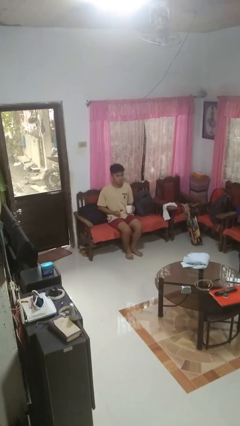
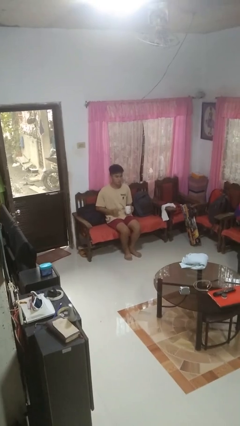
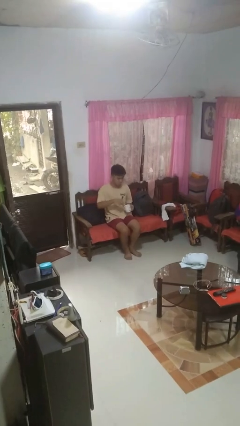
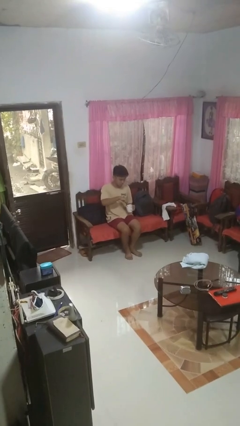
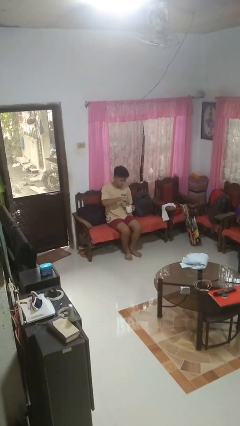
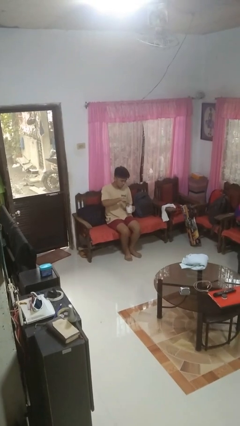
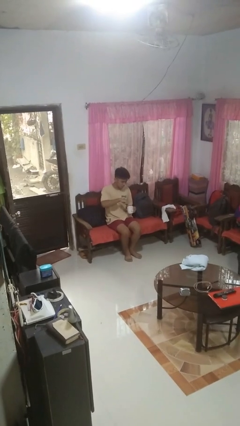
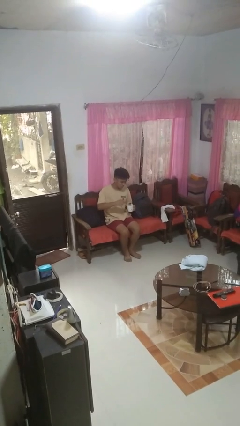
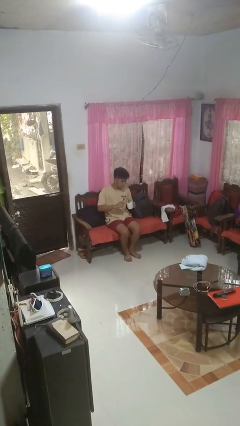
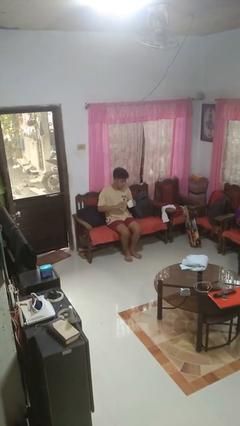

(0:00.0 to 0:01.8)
person stirs mug

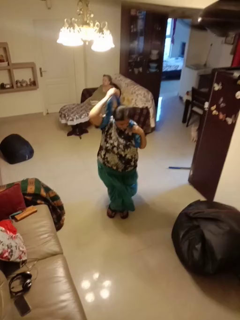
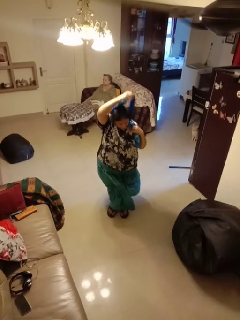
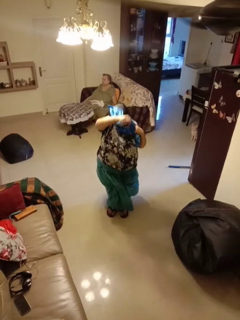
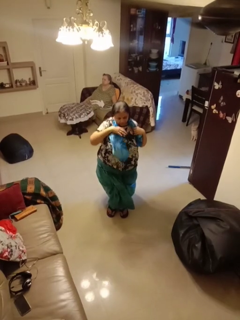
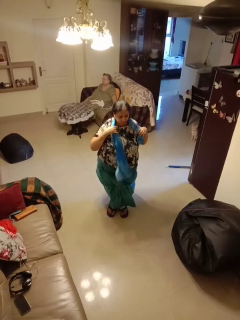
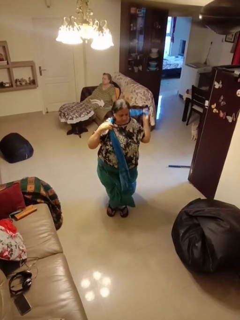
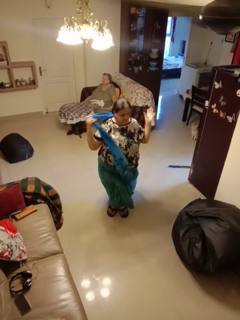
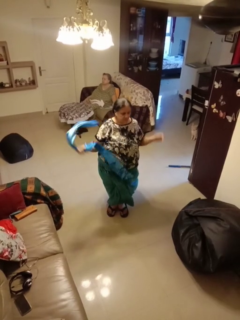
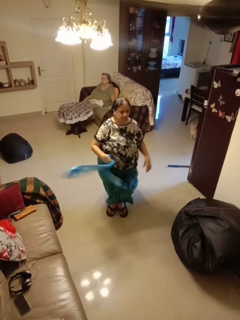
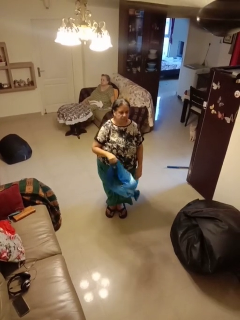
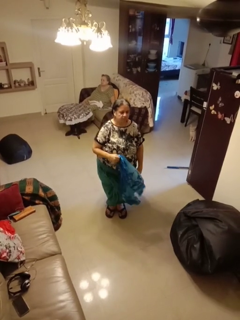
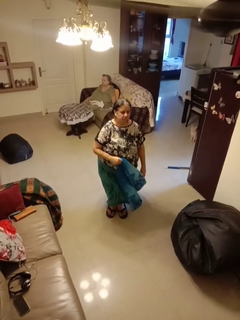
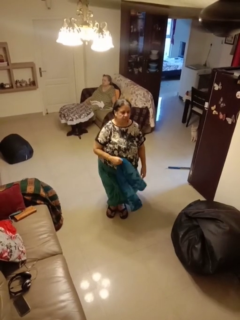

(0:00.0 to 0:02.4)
person takes off scarf

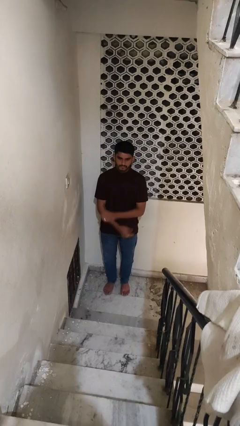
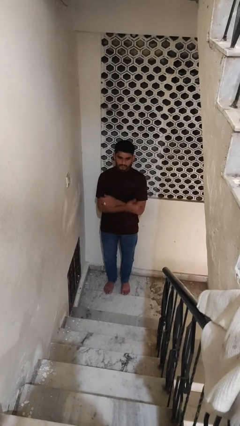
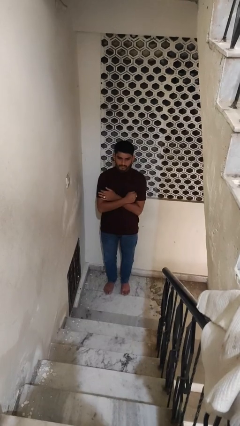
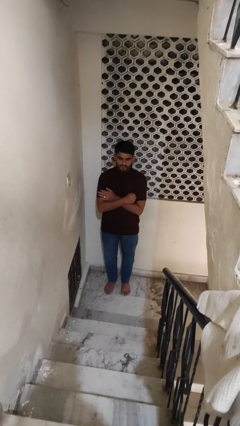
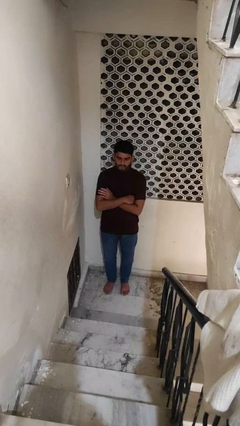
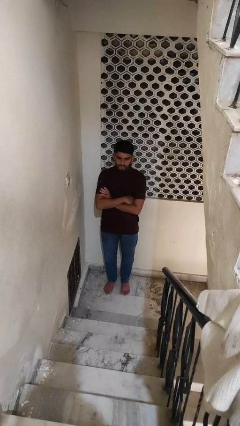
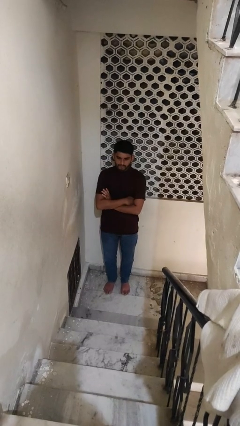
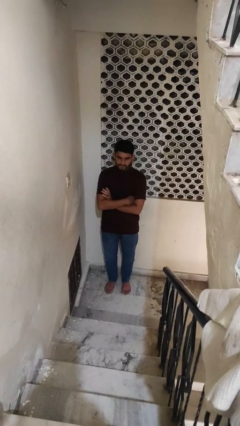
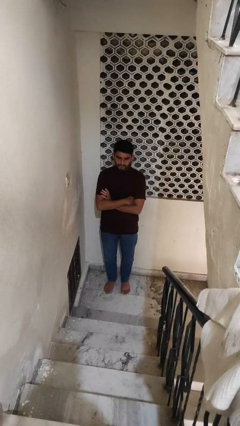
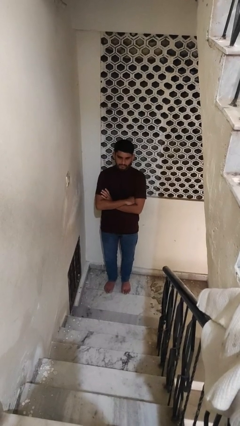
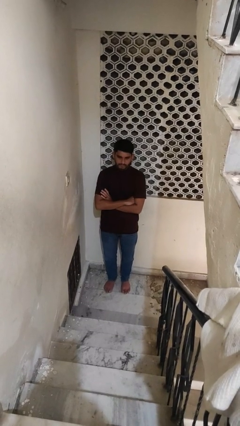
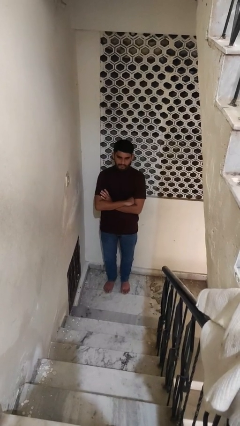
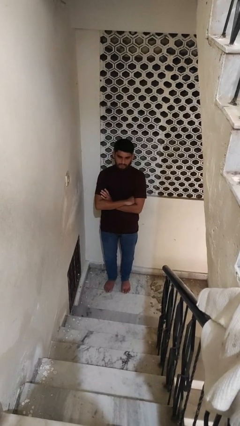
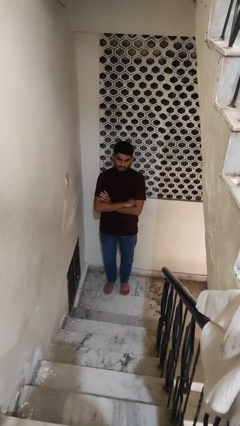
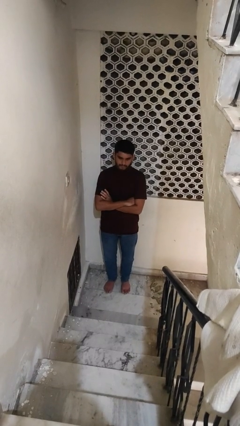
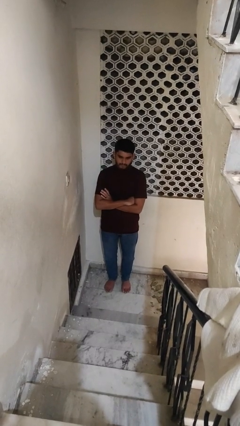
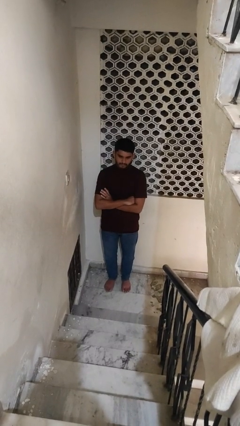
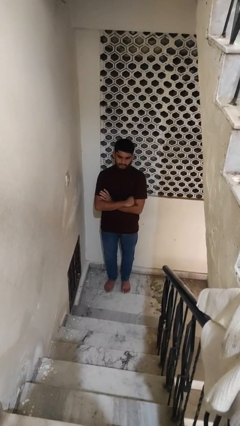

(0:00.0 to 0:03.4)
person crosses arms

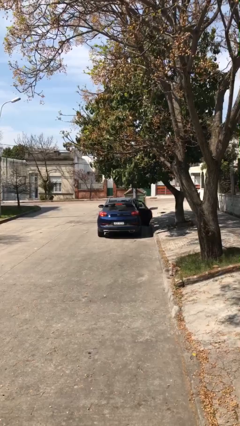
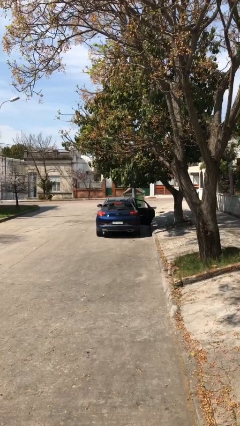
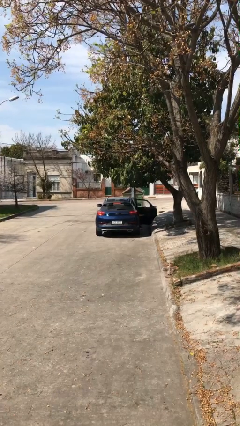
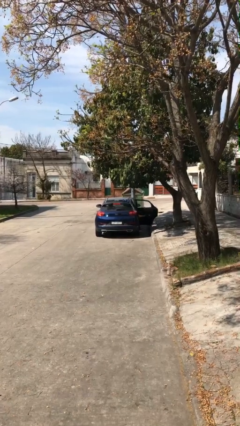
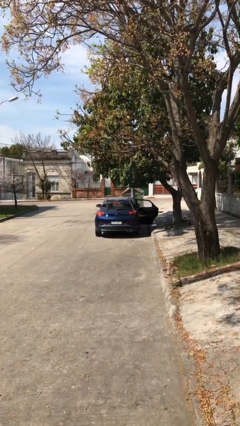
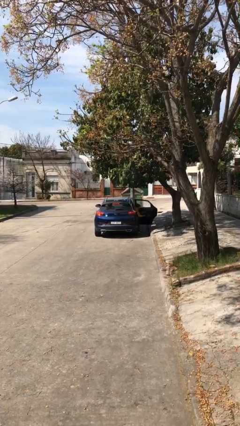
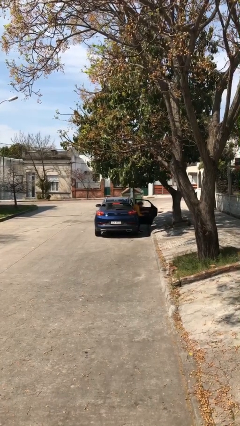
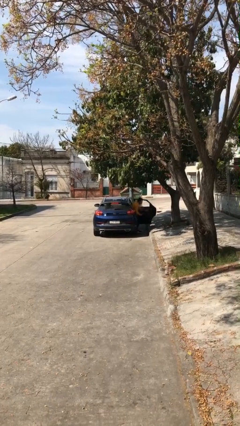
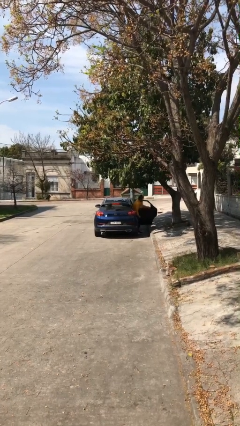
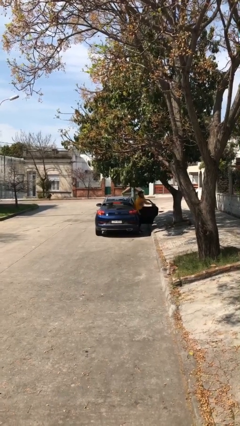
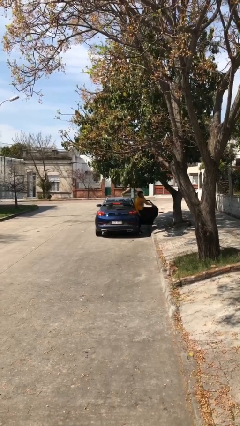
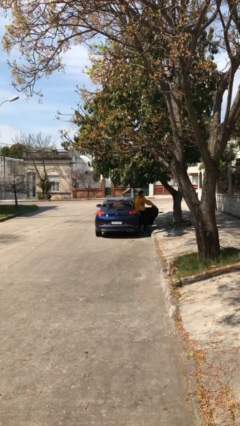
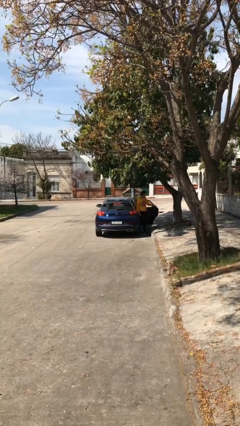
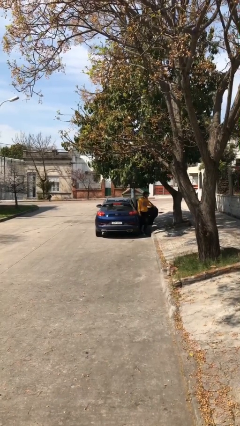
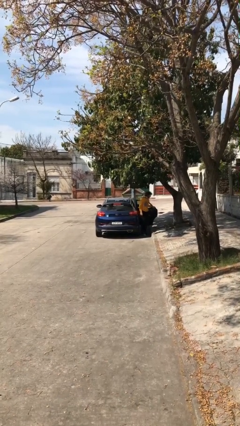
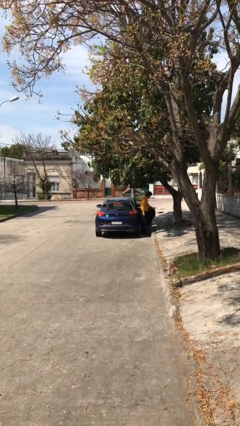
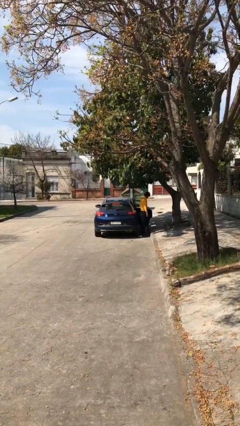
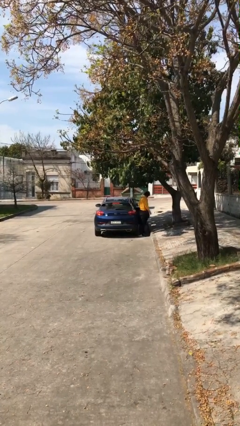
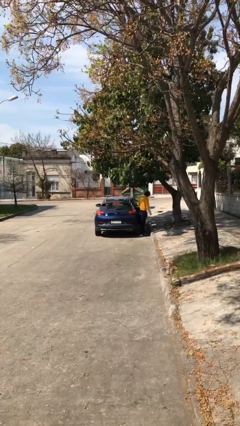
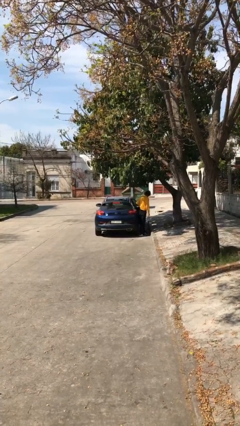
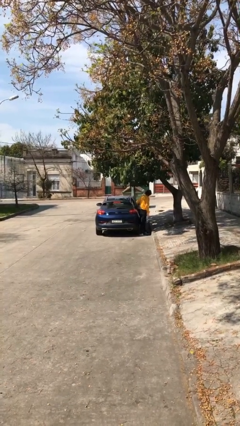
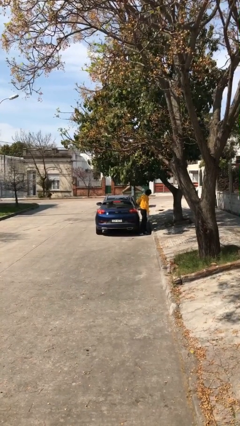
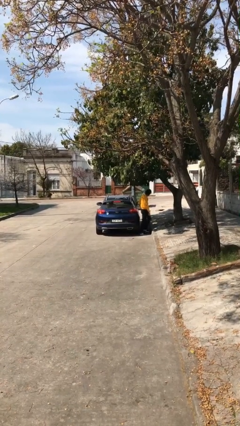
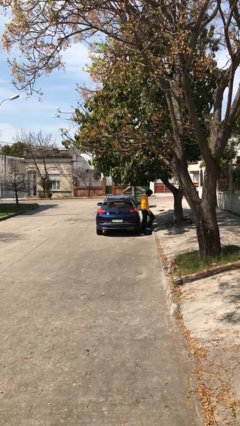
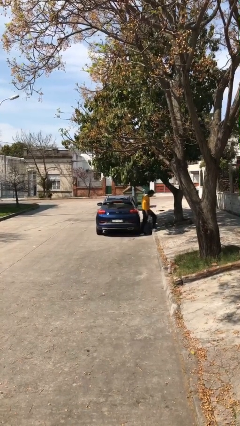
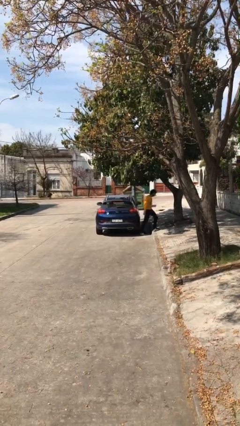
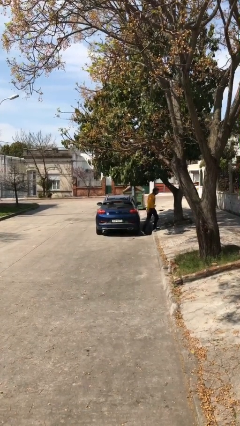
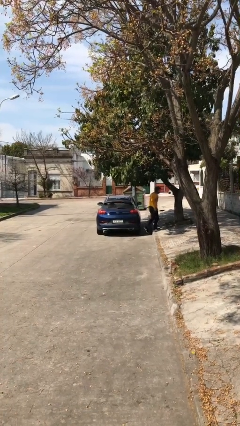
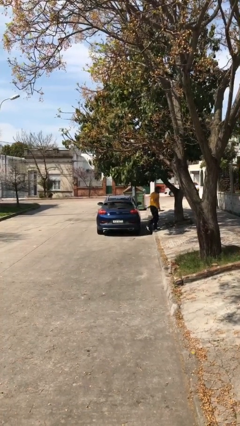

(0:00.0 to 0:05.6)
car drops off person

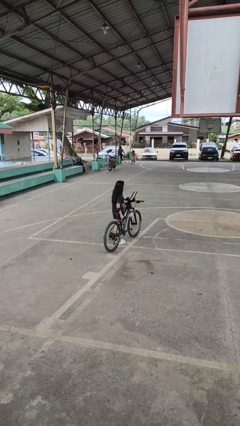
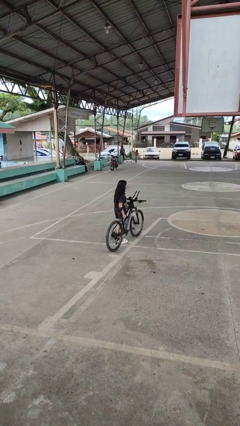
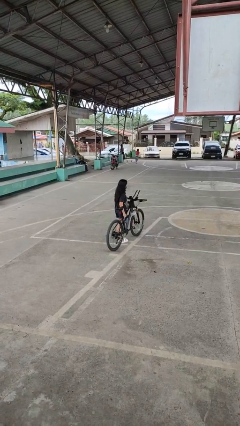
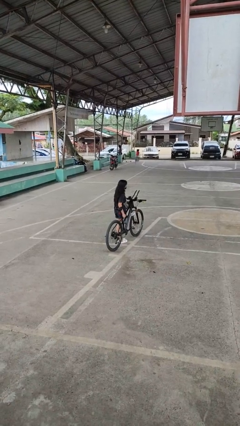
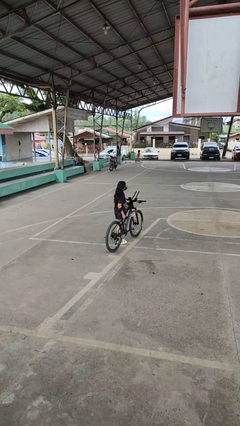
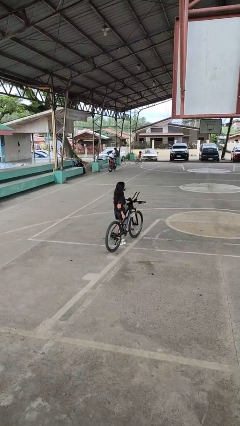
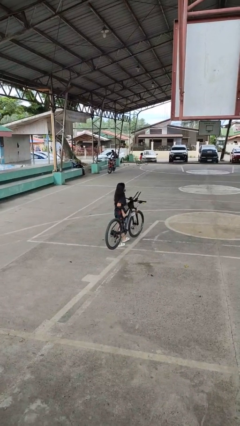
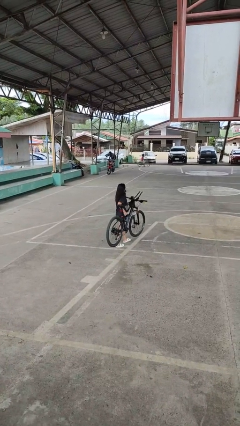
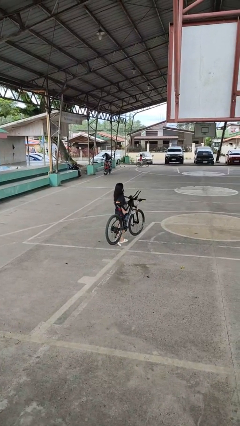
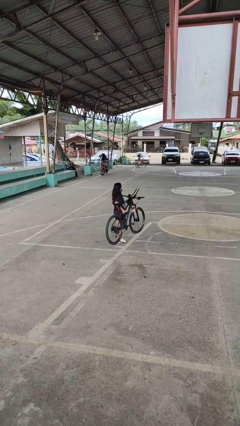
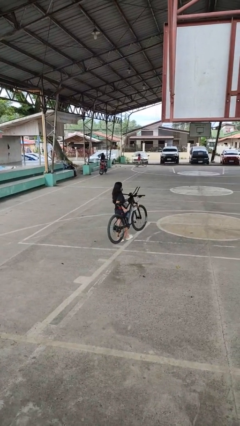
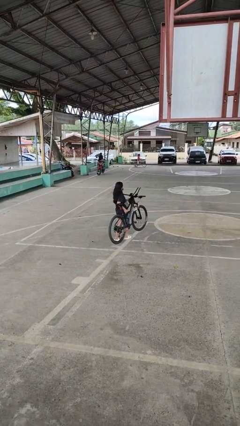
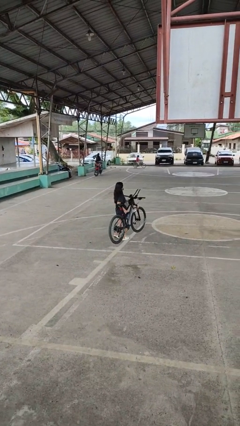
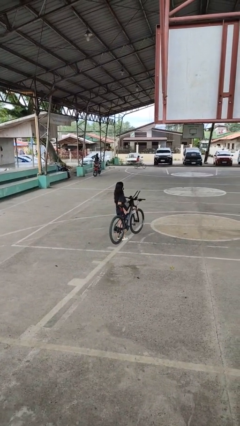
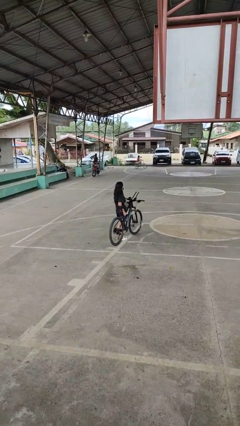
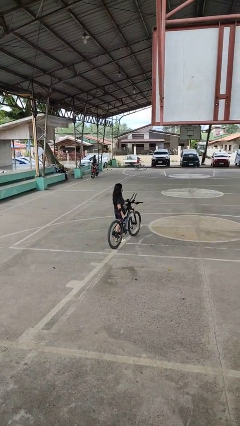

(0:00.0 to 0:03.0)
person carries bicycle

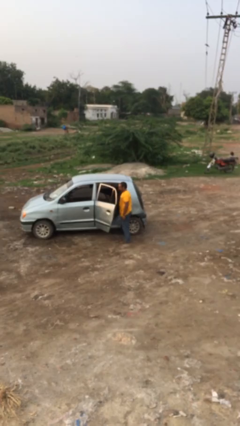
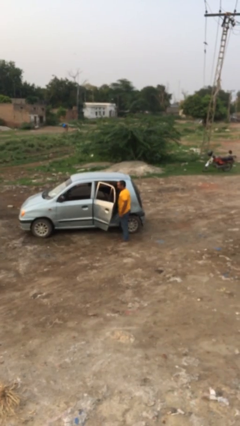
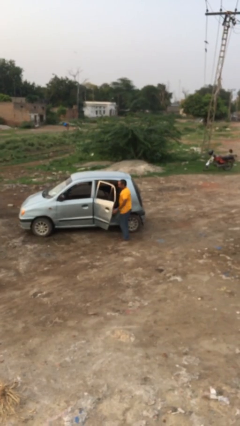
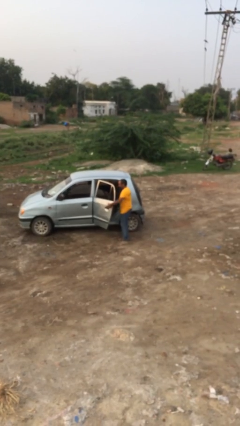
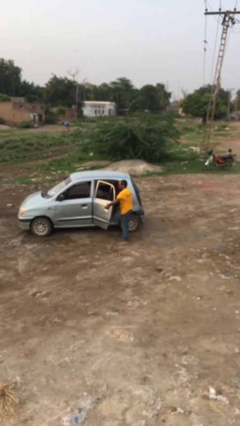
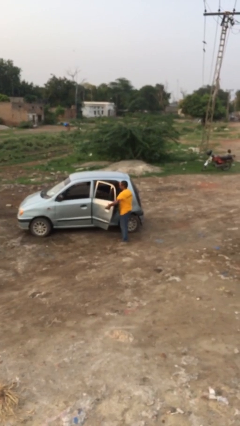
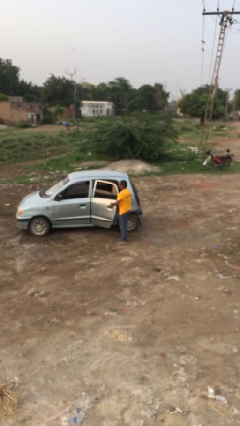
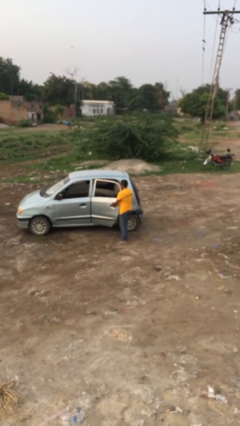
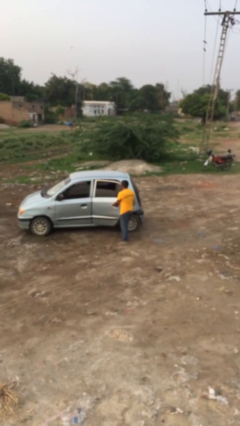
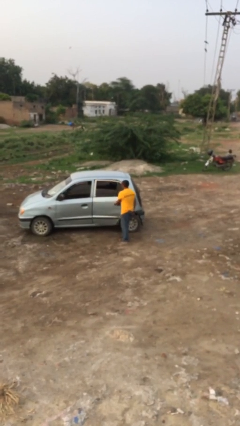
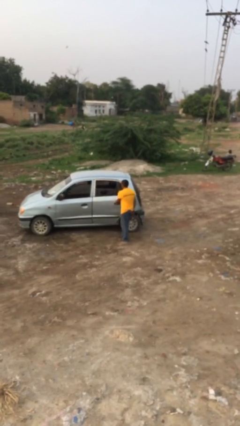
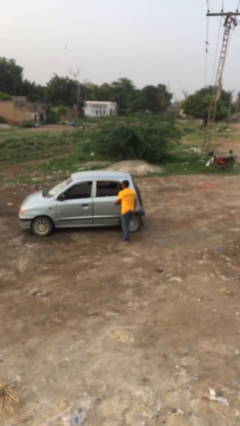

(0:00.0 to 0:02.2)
person closes car door
